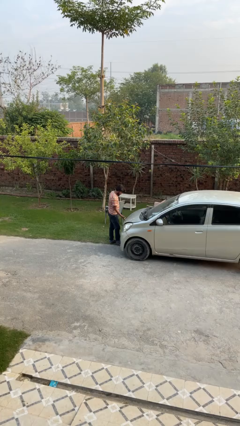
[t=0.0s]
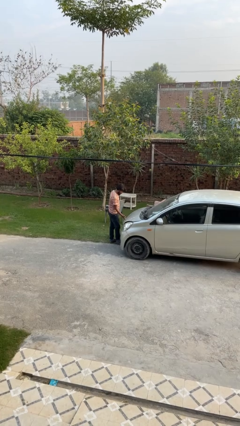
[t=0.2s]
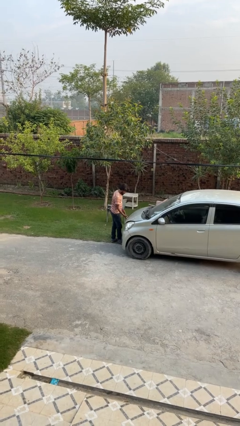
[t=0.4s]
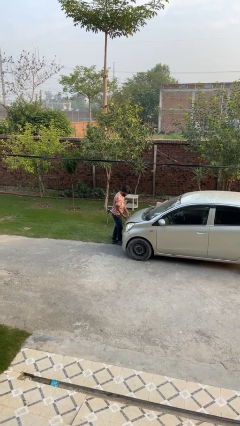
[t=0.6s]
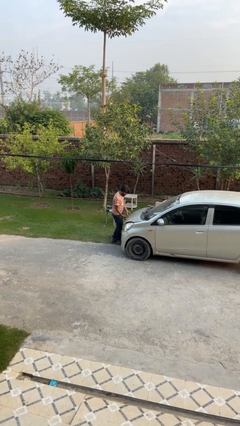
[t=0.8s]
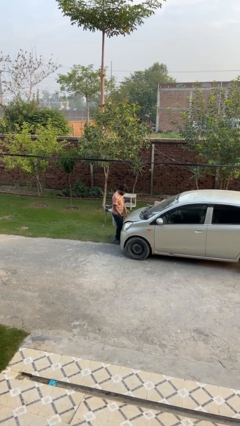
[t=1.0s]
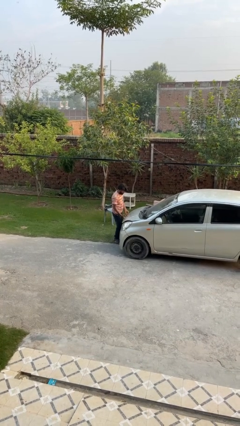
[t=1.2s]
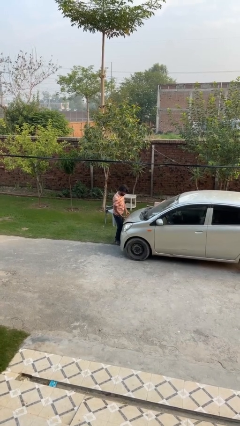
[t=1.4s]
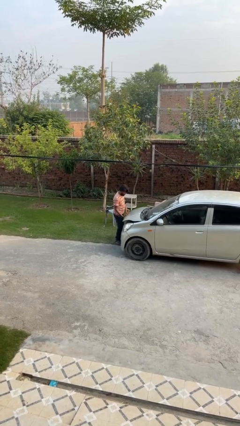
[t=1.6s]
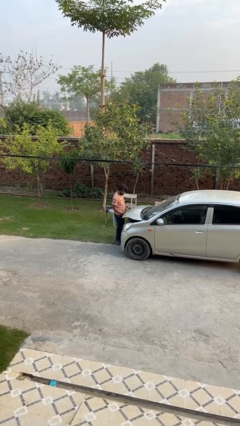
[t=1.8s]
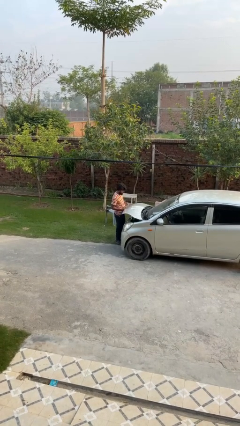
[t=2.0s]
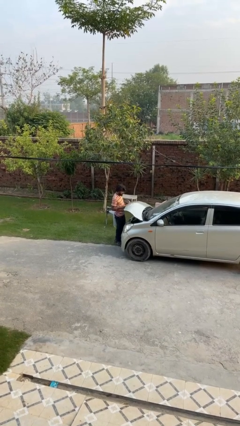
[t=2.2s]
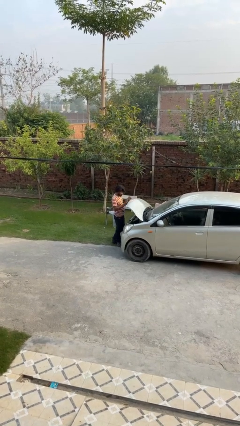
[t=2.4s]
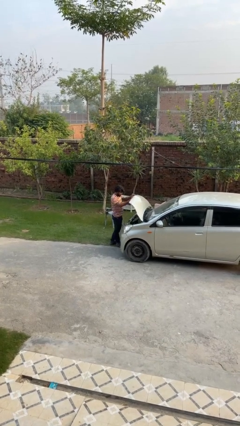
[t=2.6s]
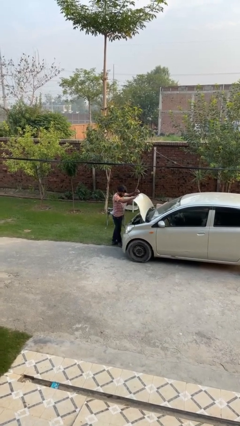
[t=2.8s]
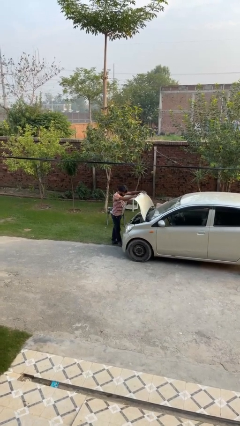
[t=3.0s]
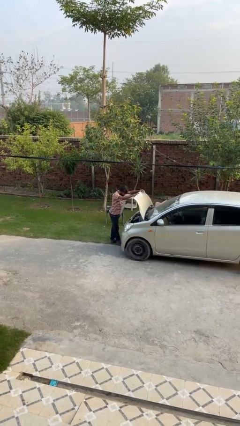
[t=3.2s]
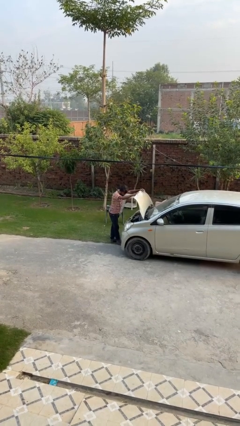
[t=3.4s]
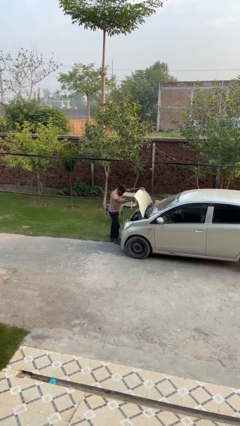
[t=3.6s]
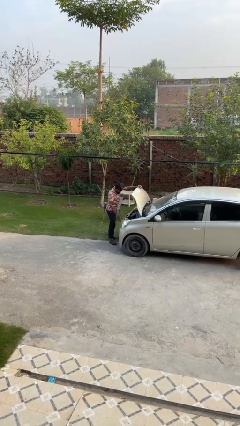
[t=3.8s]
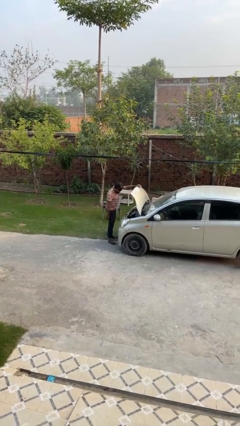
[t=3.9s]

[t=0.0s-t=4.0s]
person opens car hood

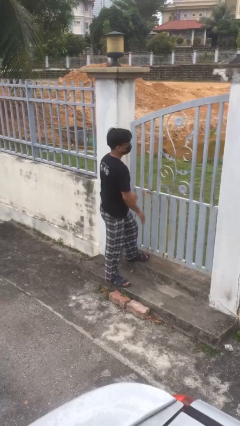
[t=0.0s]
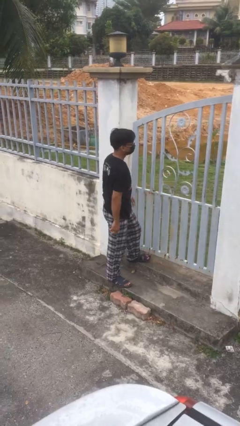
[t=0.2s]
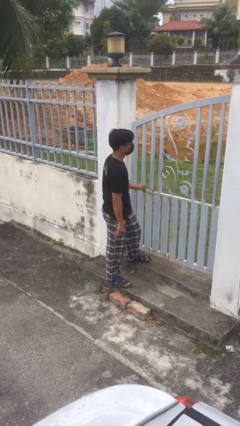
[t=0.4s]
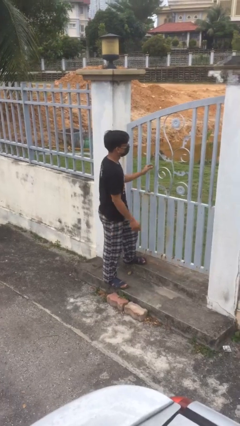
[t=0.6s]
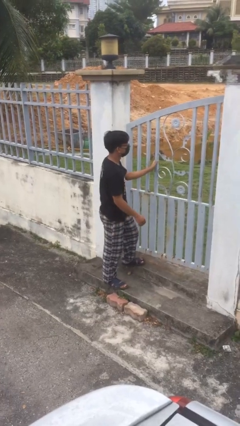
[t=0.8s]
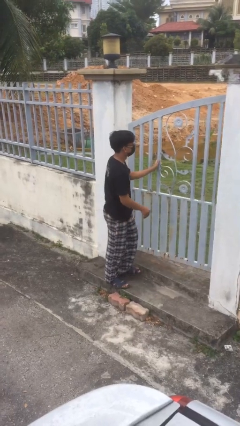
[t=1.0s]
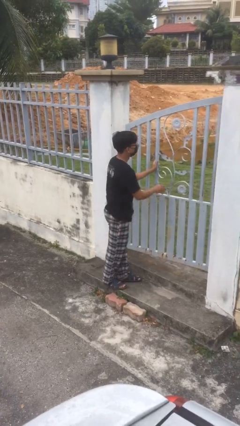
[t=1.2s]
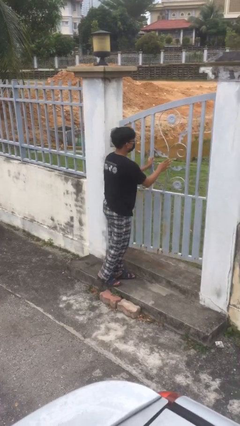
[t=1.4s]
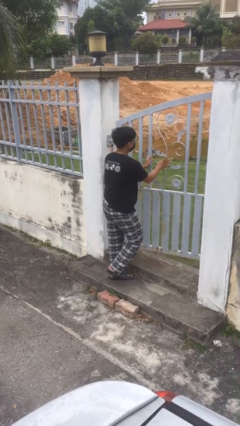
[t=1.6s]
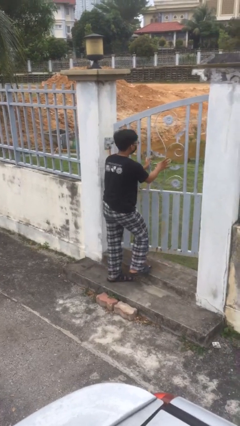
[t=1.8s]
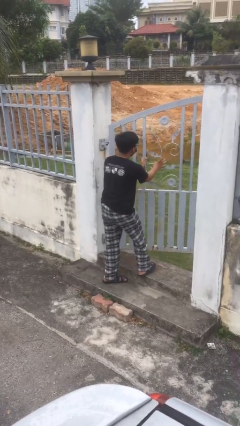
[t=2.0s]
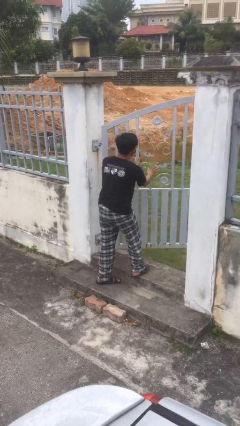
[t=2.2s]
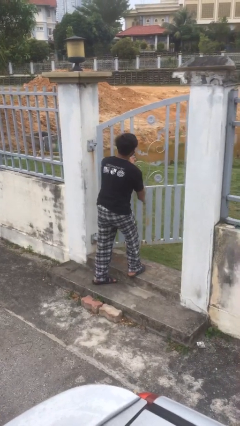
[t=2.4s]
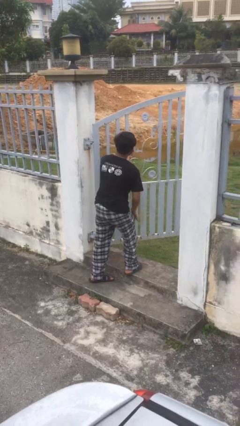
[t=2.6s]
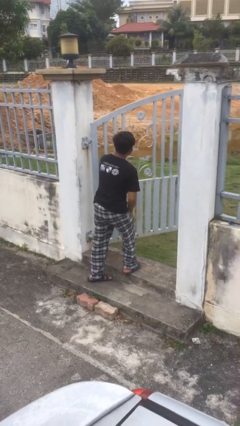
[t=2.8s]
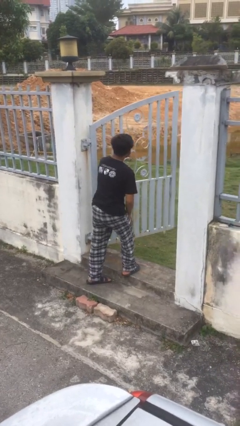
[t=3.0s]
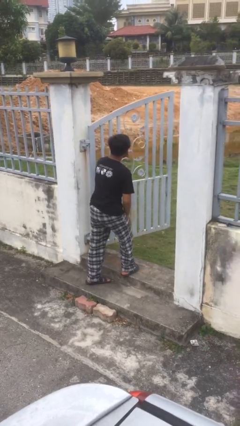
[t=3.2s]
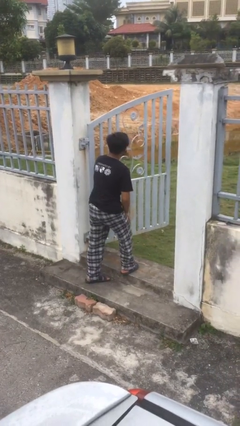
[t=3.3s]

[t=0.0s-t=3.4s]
person opens facility door

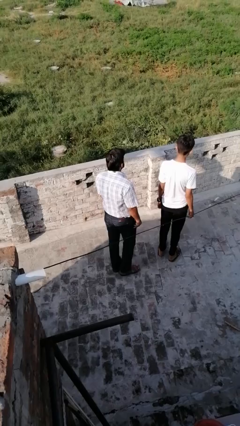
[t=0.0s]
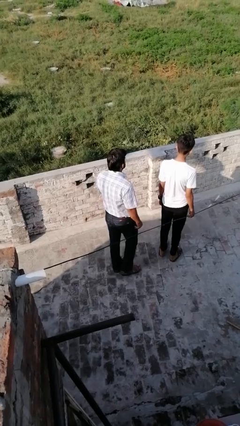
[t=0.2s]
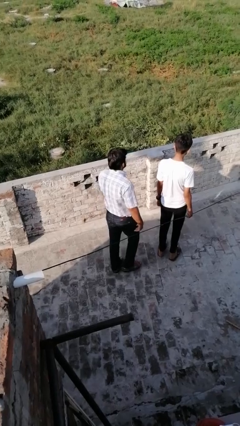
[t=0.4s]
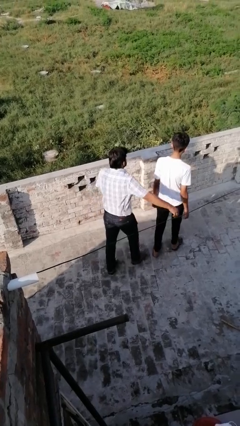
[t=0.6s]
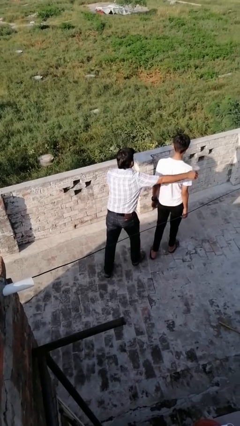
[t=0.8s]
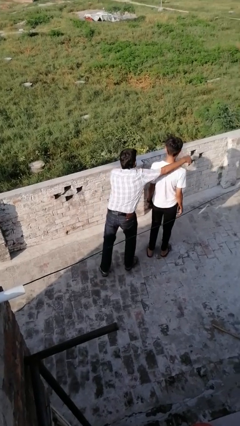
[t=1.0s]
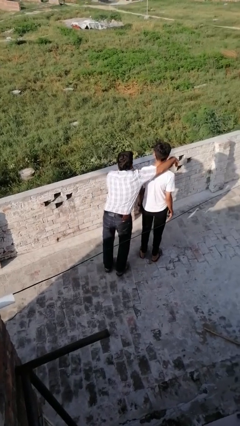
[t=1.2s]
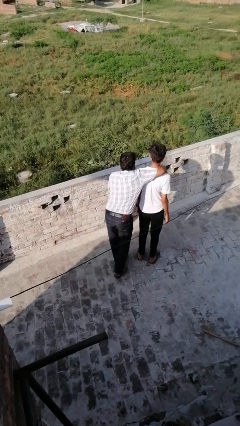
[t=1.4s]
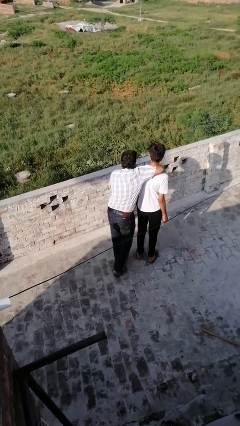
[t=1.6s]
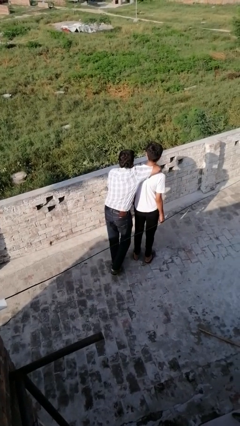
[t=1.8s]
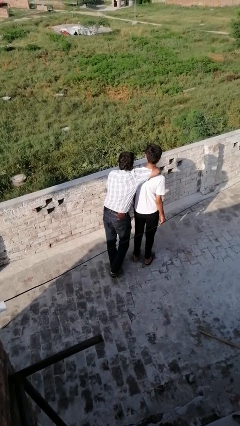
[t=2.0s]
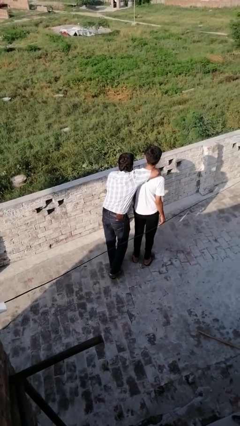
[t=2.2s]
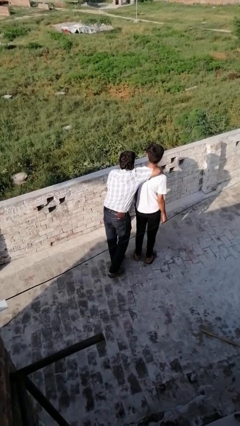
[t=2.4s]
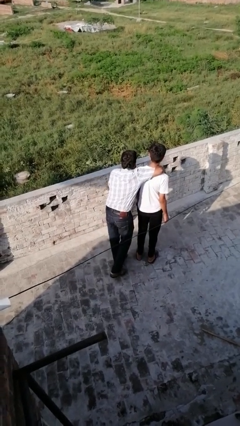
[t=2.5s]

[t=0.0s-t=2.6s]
person hugs person from behind

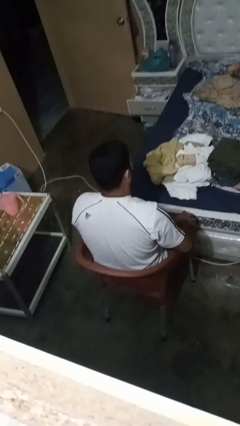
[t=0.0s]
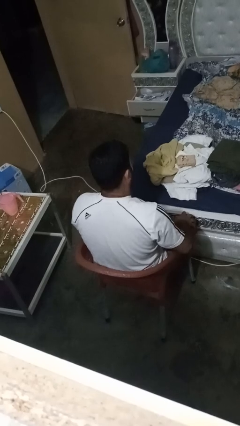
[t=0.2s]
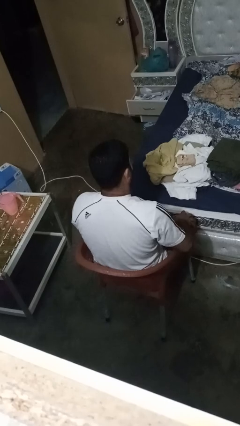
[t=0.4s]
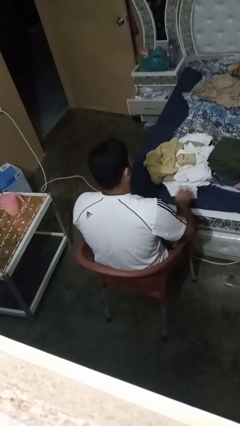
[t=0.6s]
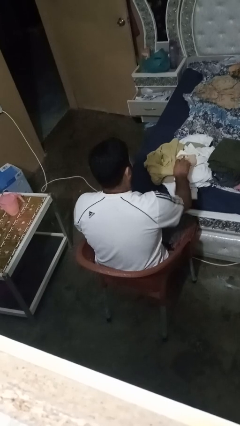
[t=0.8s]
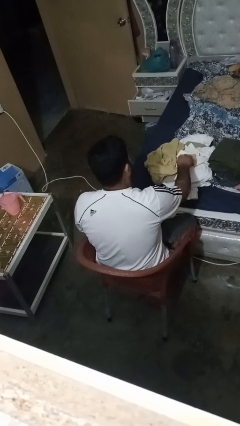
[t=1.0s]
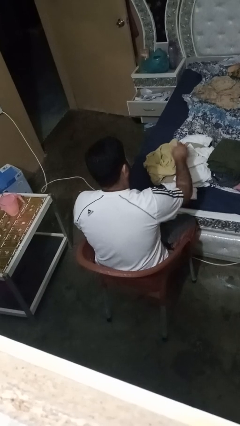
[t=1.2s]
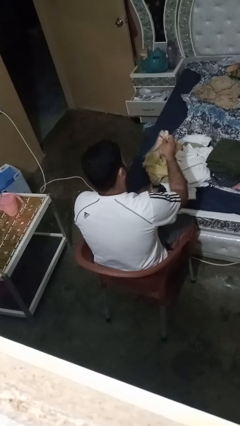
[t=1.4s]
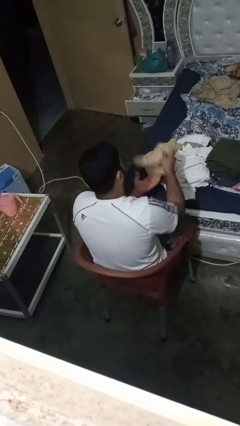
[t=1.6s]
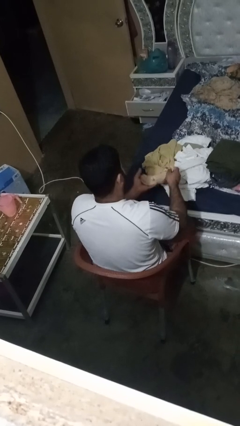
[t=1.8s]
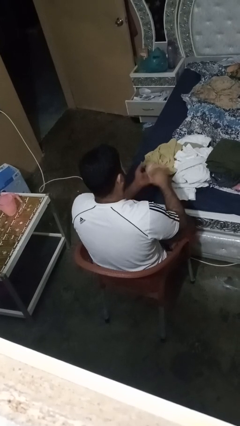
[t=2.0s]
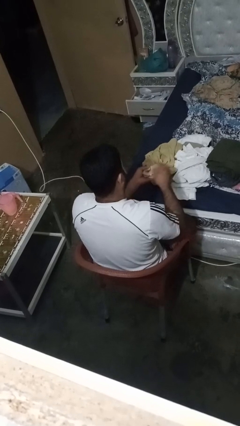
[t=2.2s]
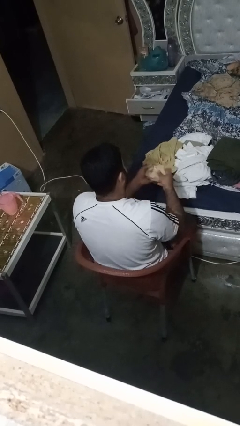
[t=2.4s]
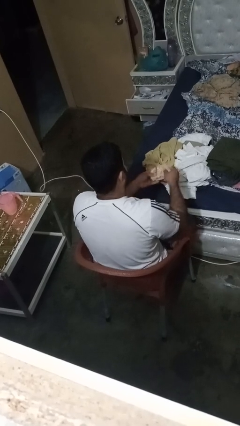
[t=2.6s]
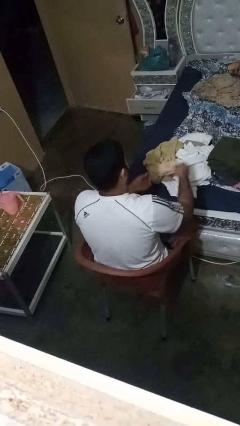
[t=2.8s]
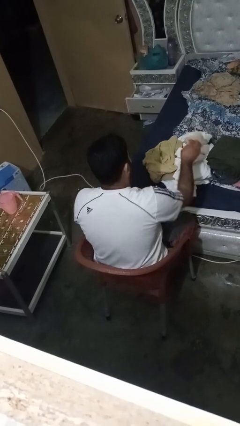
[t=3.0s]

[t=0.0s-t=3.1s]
person folds socks

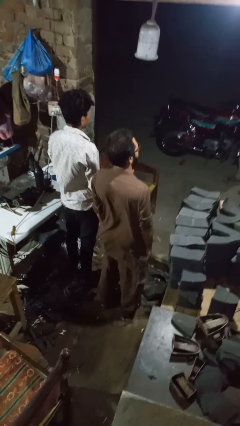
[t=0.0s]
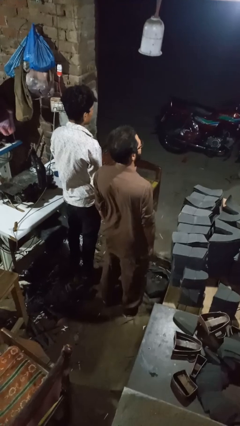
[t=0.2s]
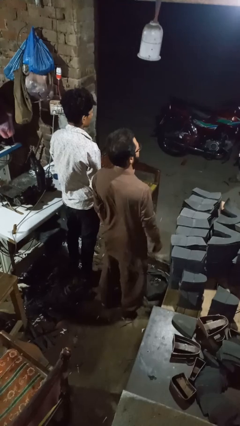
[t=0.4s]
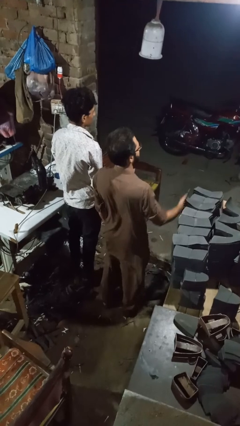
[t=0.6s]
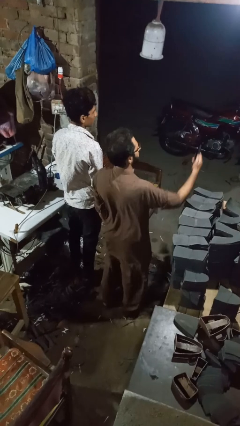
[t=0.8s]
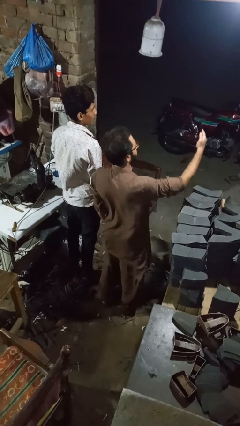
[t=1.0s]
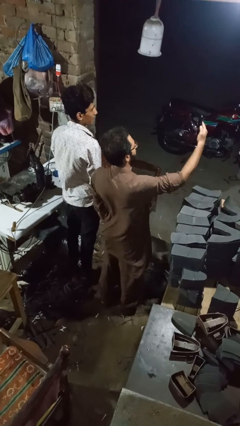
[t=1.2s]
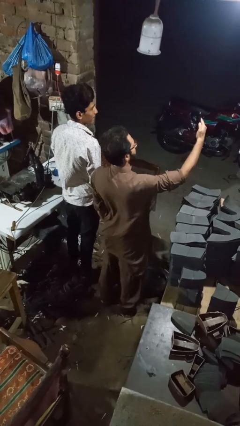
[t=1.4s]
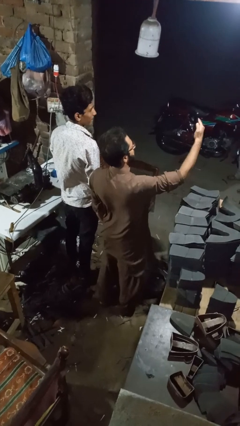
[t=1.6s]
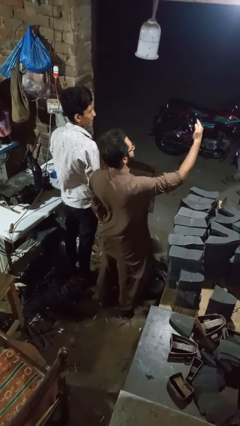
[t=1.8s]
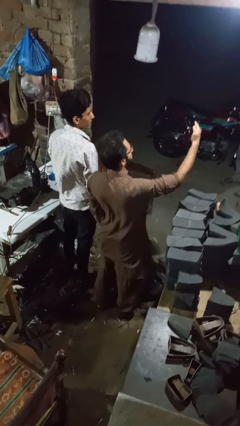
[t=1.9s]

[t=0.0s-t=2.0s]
person takes selfie with person

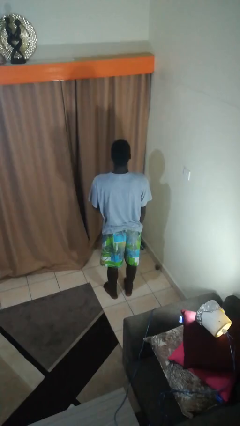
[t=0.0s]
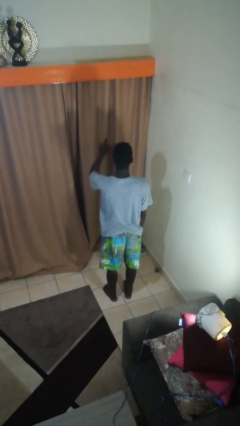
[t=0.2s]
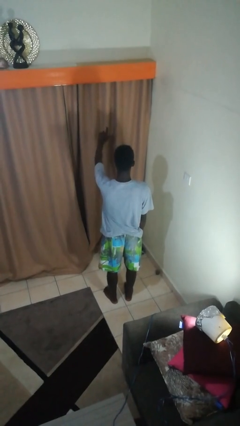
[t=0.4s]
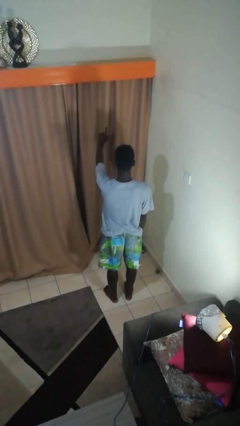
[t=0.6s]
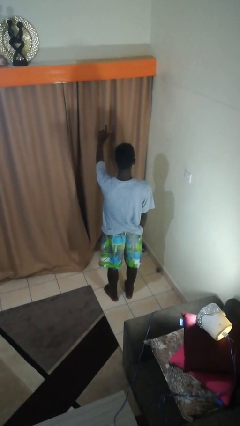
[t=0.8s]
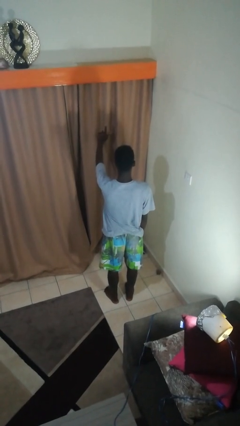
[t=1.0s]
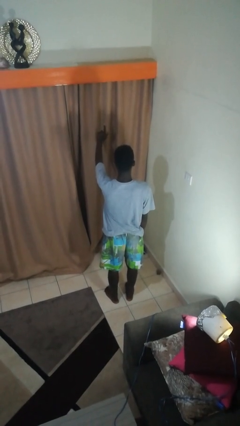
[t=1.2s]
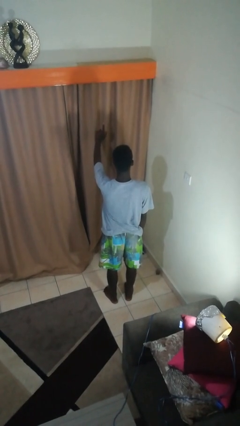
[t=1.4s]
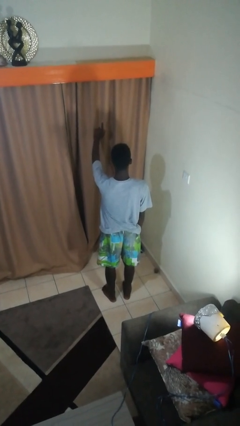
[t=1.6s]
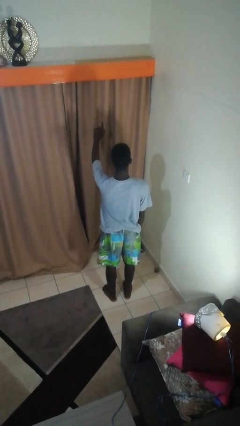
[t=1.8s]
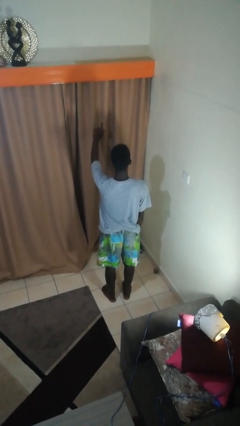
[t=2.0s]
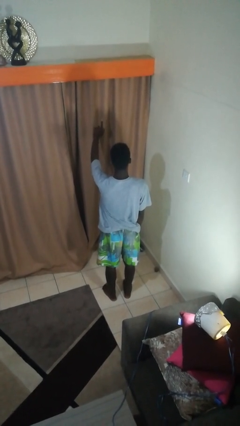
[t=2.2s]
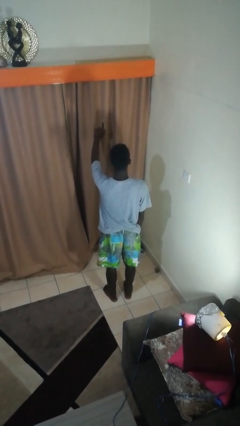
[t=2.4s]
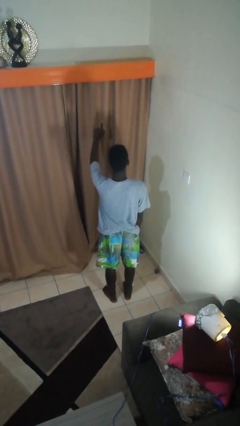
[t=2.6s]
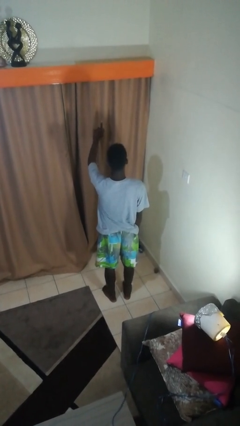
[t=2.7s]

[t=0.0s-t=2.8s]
person gestures number one
